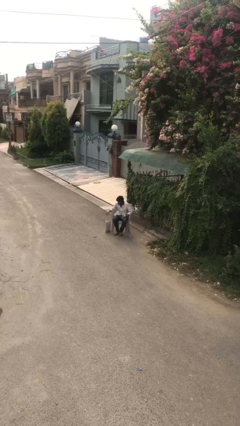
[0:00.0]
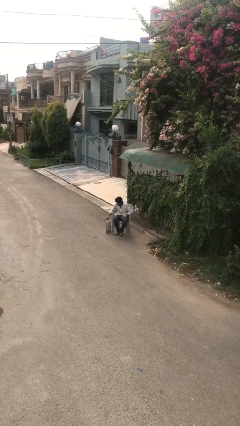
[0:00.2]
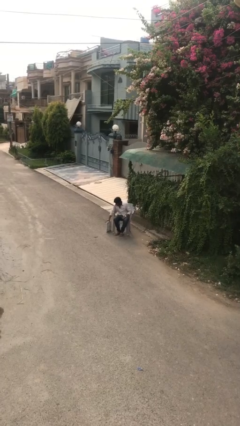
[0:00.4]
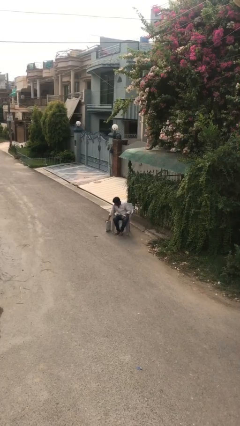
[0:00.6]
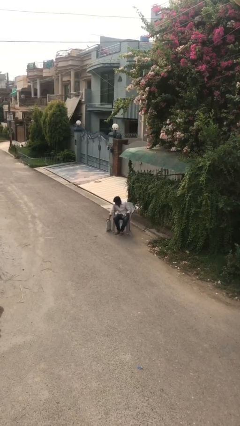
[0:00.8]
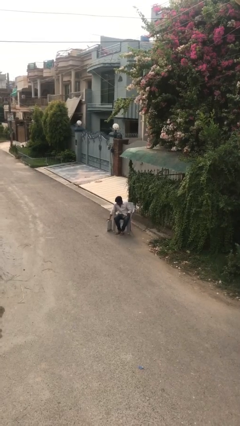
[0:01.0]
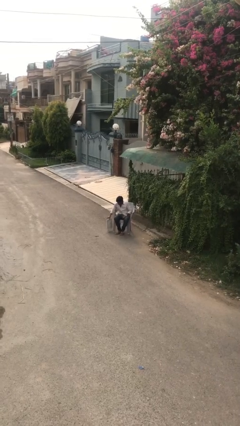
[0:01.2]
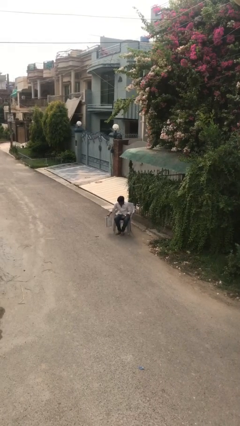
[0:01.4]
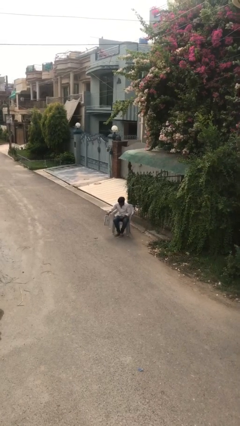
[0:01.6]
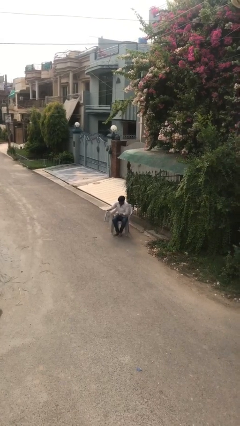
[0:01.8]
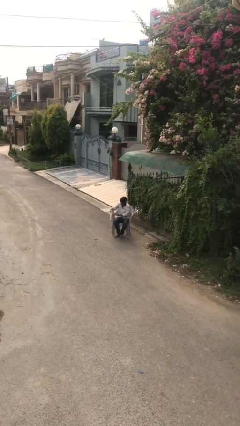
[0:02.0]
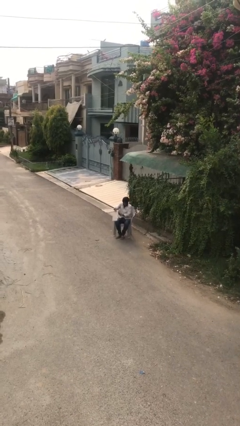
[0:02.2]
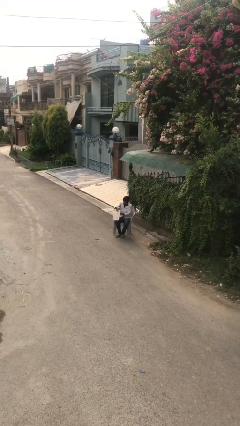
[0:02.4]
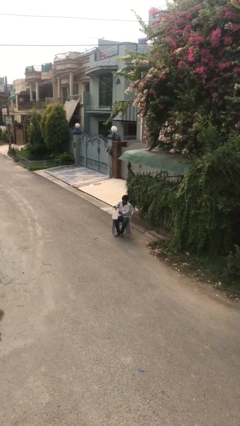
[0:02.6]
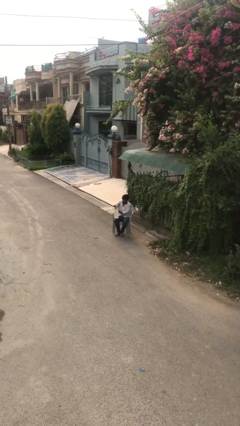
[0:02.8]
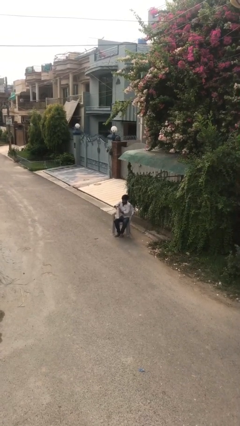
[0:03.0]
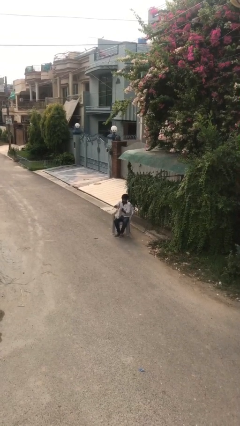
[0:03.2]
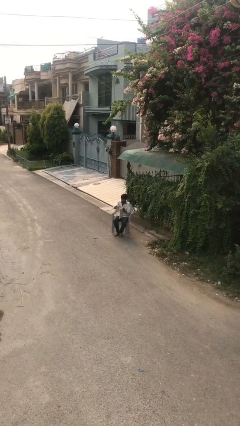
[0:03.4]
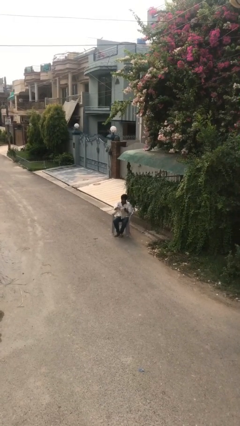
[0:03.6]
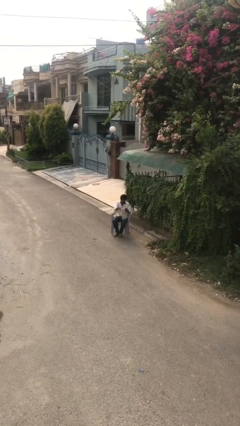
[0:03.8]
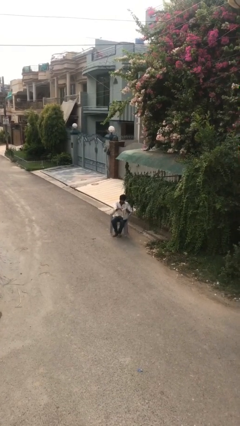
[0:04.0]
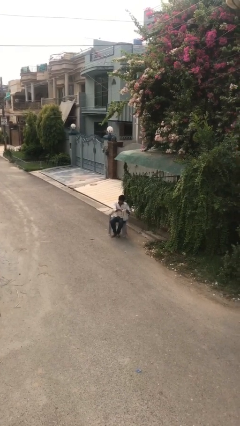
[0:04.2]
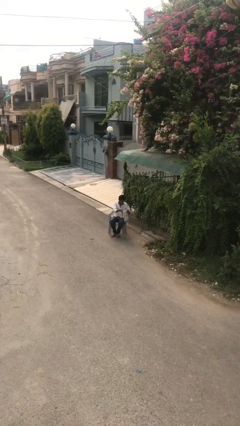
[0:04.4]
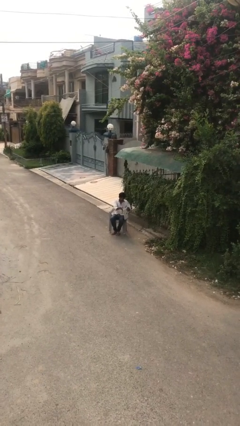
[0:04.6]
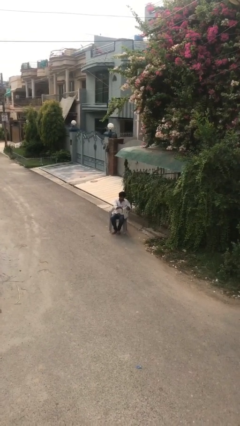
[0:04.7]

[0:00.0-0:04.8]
person picks up object from floor

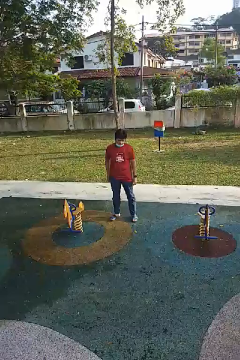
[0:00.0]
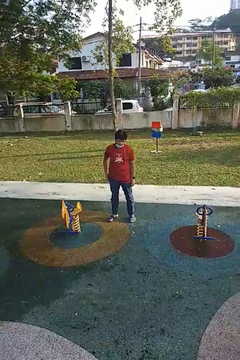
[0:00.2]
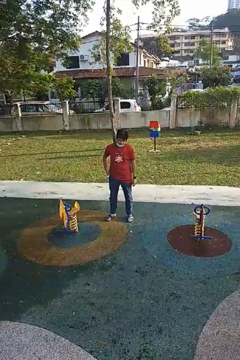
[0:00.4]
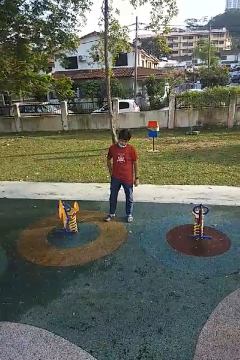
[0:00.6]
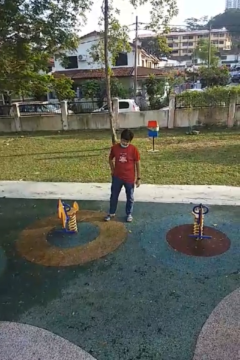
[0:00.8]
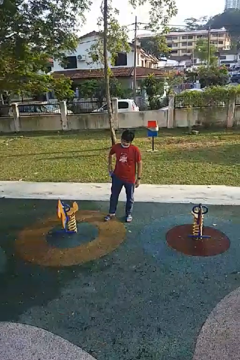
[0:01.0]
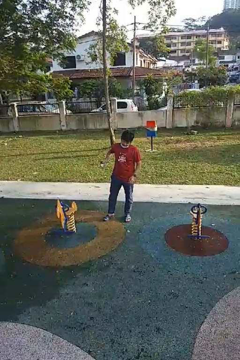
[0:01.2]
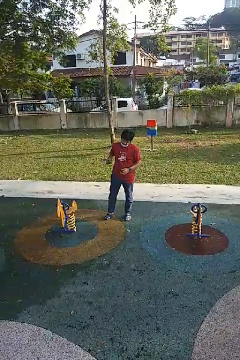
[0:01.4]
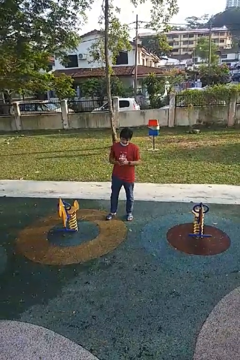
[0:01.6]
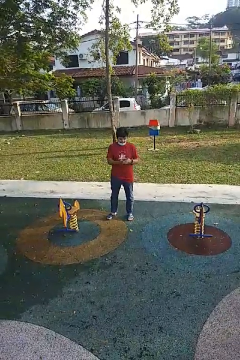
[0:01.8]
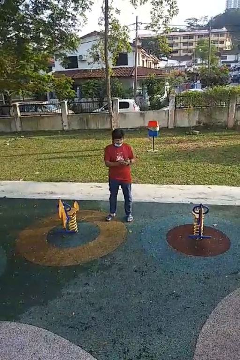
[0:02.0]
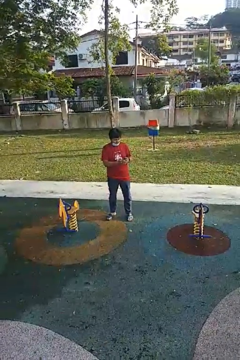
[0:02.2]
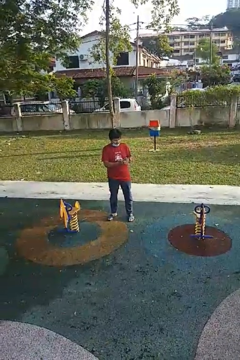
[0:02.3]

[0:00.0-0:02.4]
person takes phone from pocket

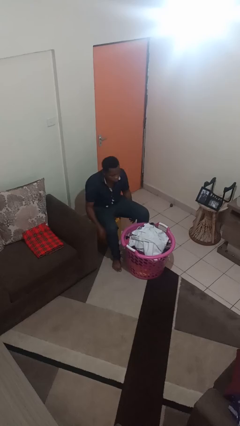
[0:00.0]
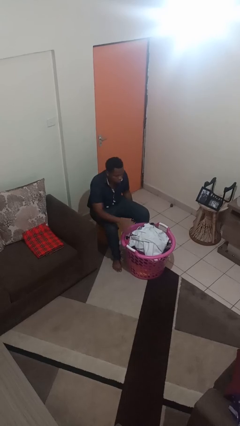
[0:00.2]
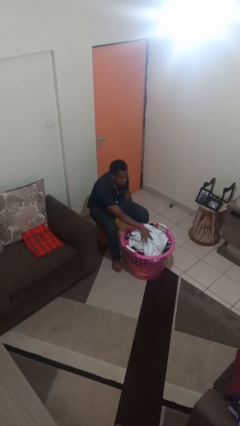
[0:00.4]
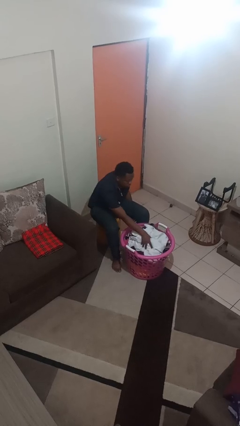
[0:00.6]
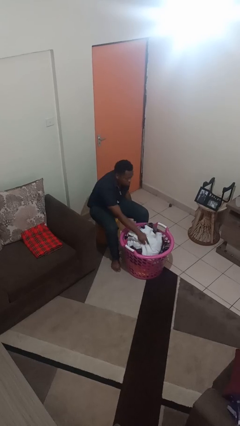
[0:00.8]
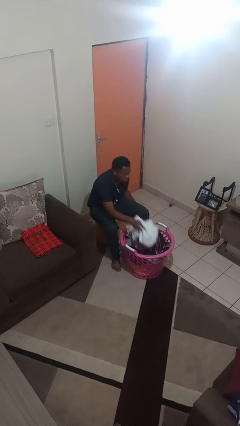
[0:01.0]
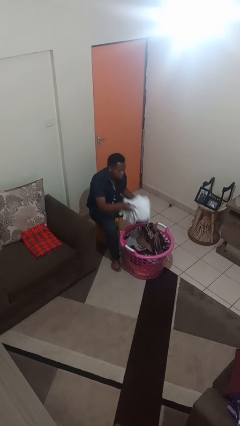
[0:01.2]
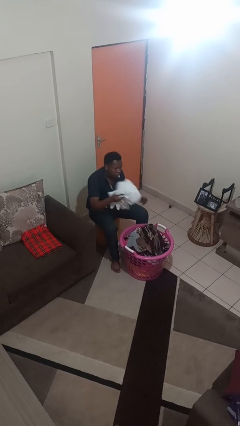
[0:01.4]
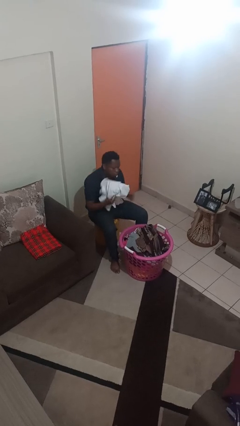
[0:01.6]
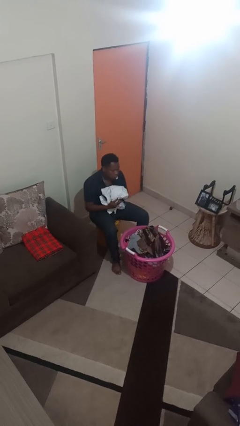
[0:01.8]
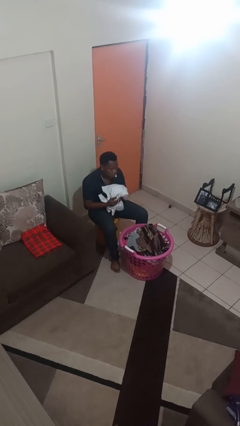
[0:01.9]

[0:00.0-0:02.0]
person takes object from basket

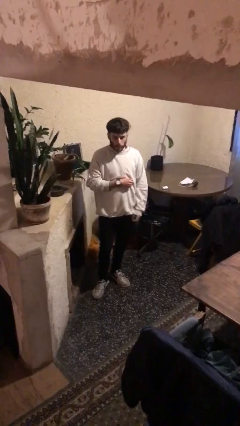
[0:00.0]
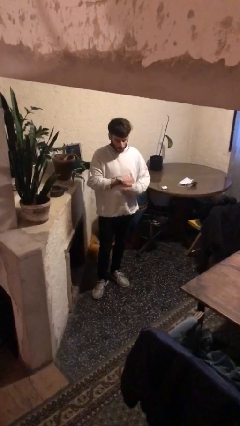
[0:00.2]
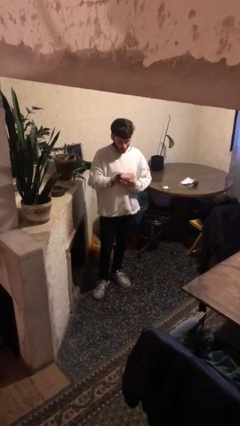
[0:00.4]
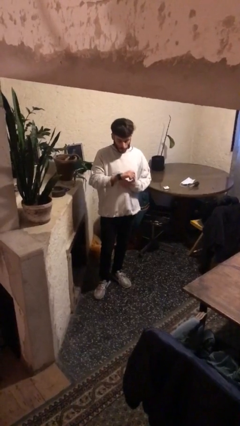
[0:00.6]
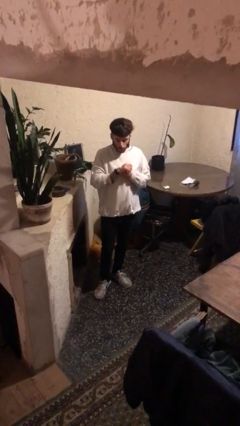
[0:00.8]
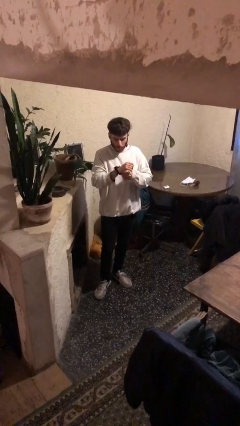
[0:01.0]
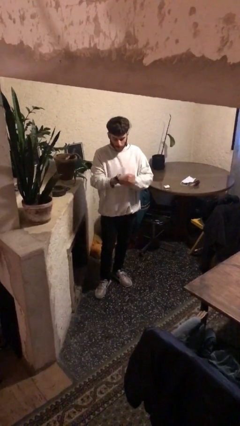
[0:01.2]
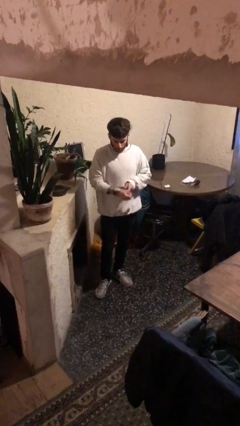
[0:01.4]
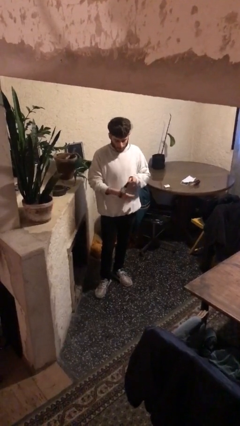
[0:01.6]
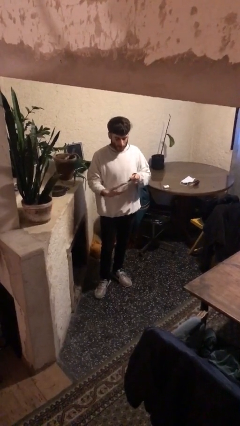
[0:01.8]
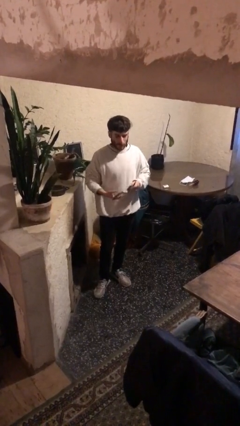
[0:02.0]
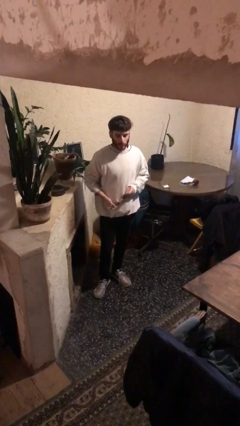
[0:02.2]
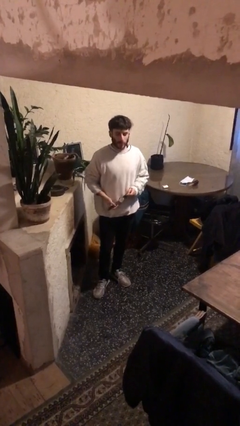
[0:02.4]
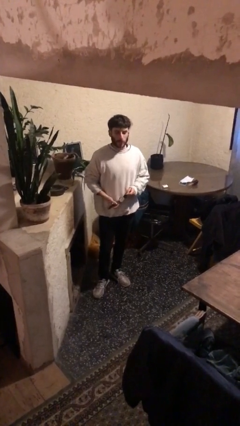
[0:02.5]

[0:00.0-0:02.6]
person takes off wristwatch

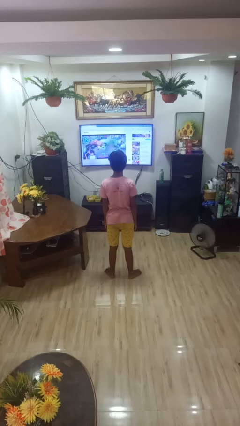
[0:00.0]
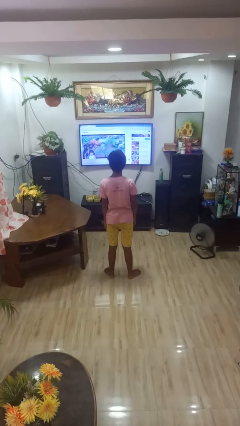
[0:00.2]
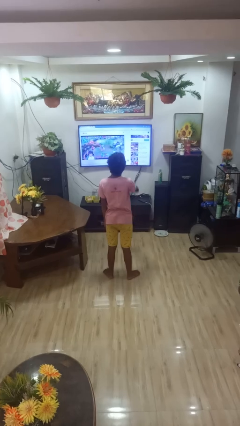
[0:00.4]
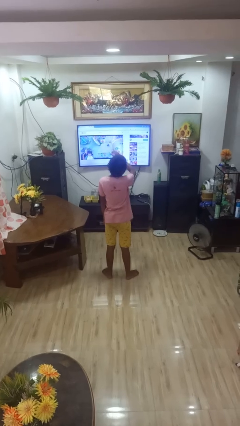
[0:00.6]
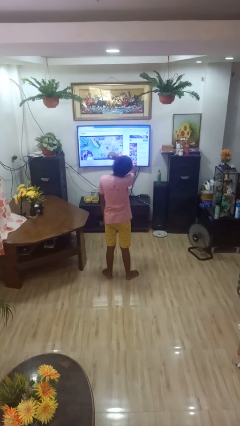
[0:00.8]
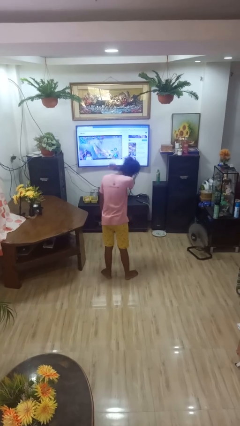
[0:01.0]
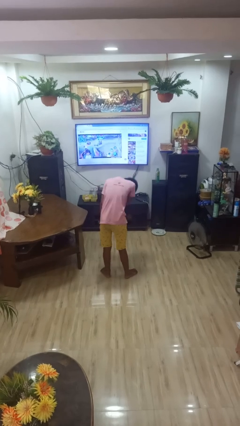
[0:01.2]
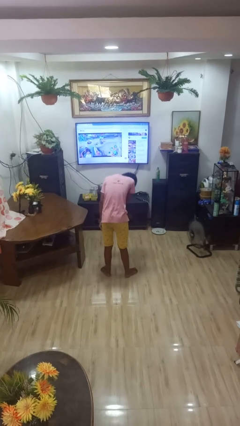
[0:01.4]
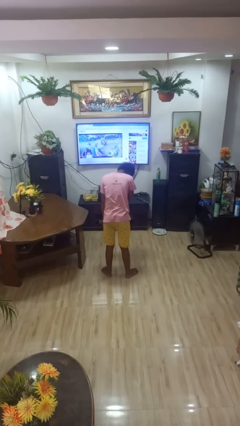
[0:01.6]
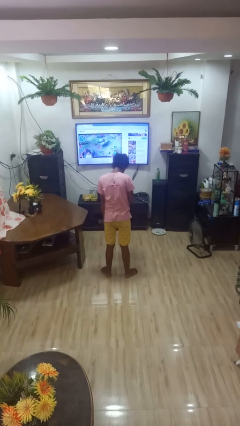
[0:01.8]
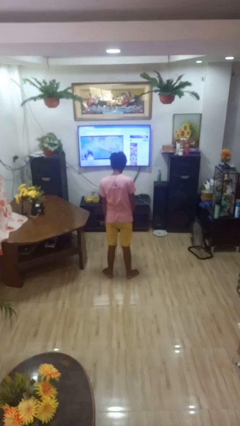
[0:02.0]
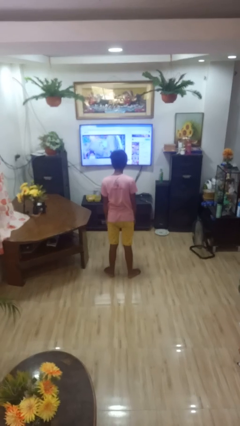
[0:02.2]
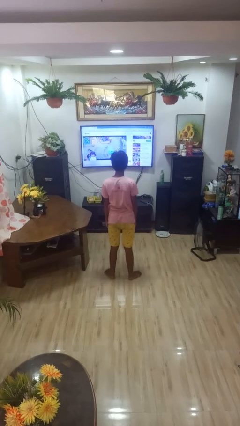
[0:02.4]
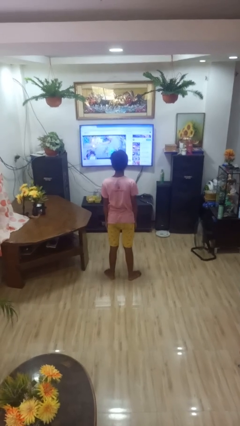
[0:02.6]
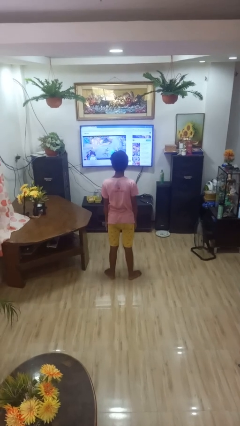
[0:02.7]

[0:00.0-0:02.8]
person sneezes into arm

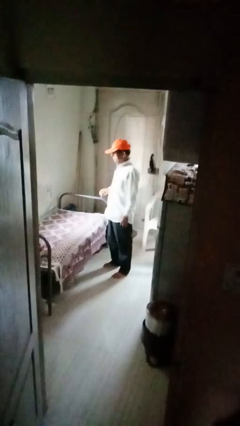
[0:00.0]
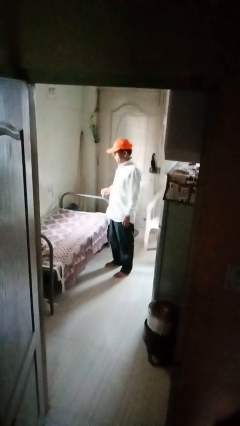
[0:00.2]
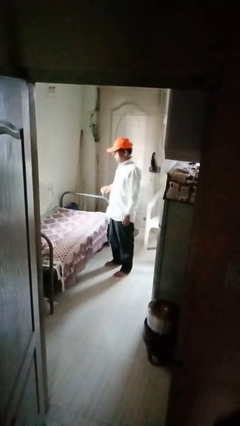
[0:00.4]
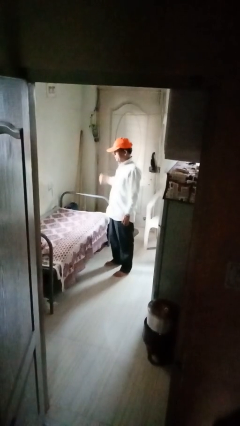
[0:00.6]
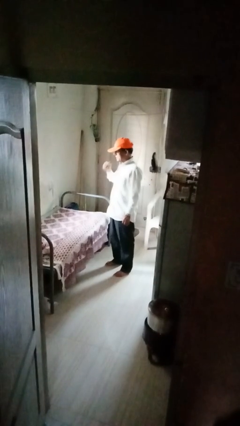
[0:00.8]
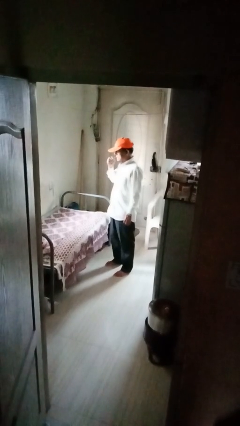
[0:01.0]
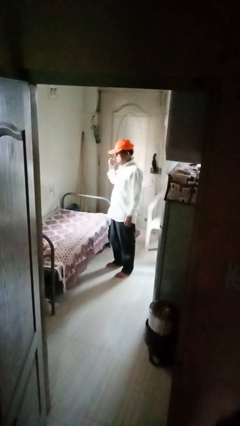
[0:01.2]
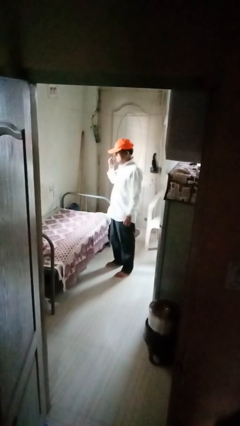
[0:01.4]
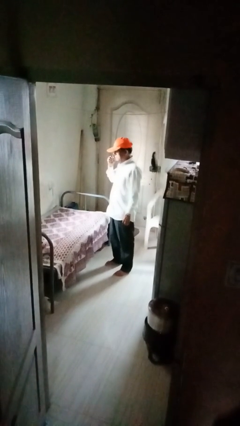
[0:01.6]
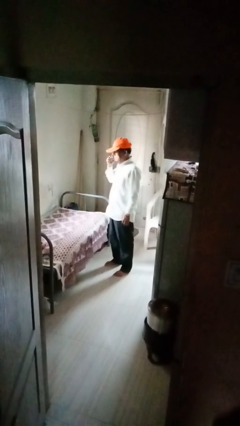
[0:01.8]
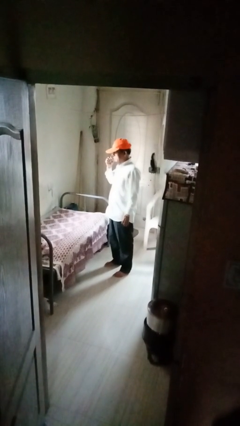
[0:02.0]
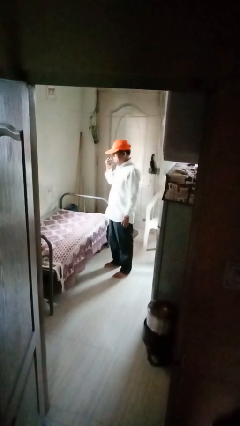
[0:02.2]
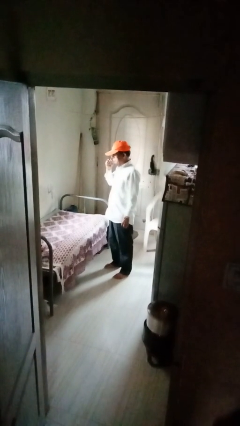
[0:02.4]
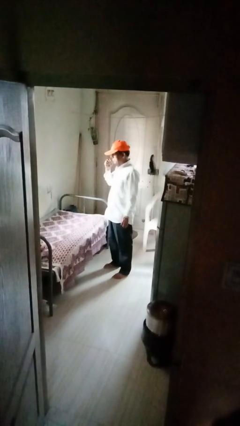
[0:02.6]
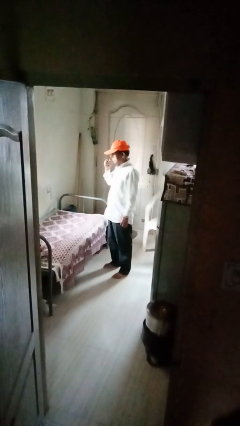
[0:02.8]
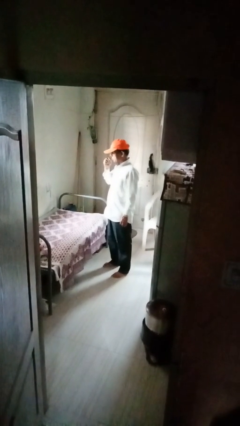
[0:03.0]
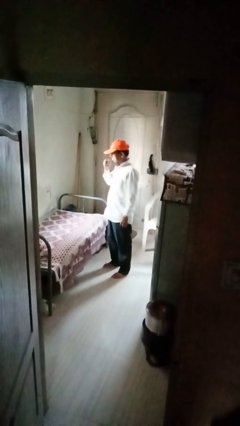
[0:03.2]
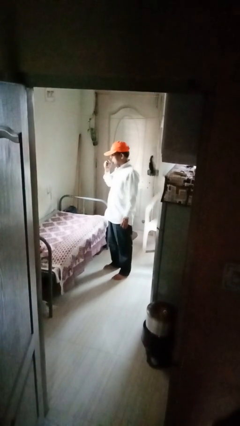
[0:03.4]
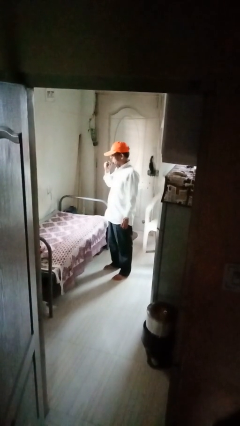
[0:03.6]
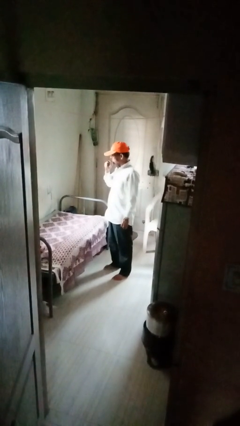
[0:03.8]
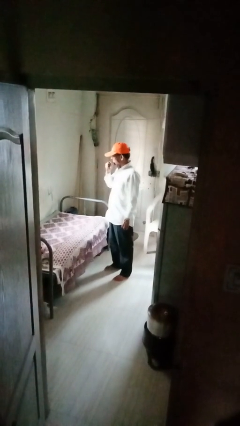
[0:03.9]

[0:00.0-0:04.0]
person flosses
